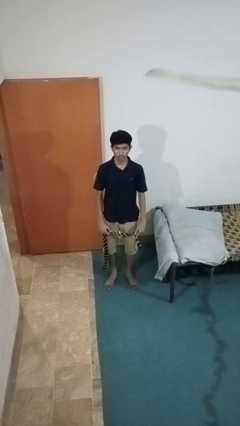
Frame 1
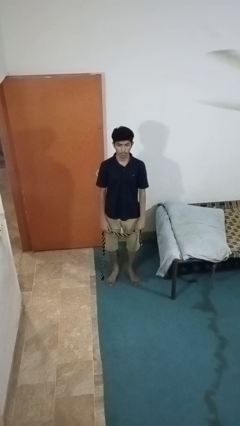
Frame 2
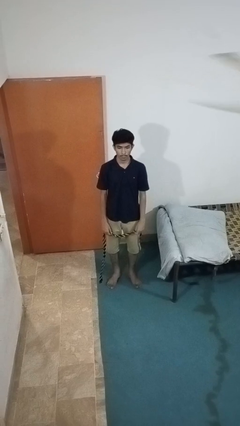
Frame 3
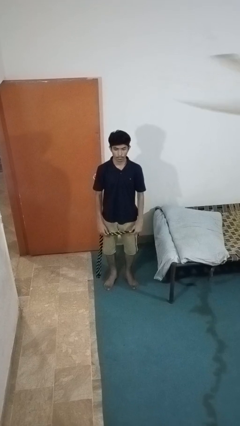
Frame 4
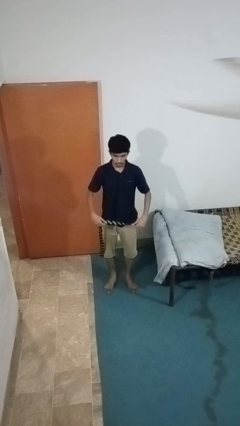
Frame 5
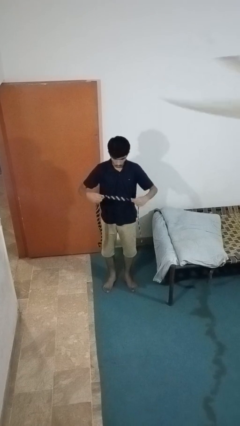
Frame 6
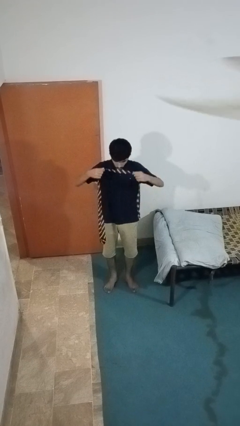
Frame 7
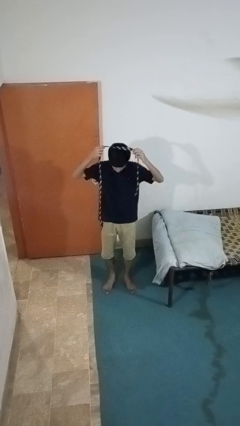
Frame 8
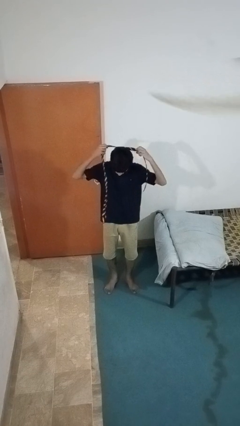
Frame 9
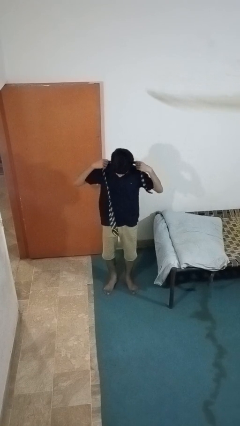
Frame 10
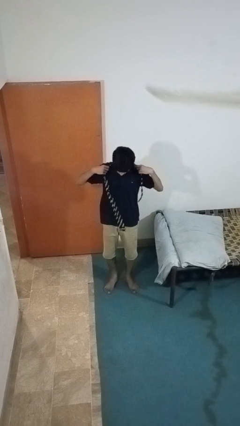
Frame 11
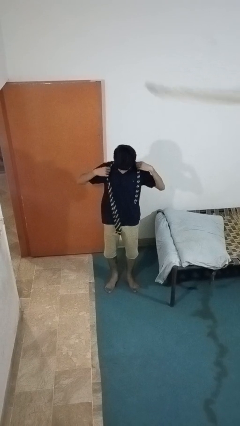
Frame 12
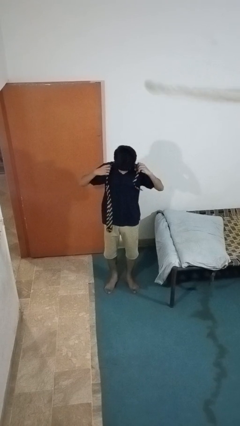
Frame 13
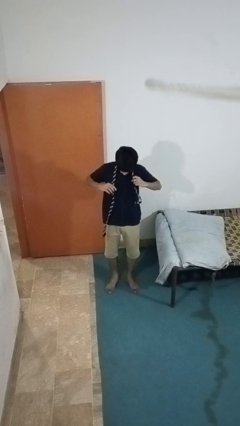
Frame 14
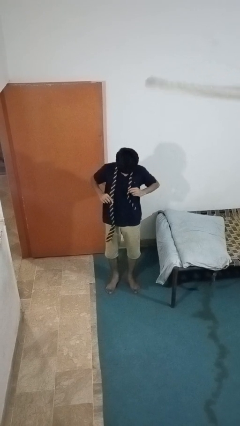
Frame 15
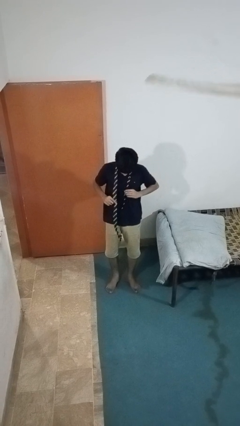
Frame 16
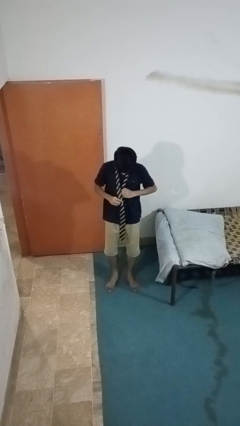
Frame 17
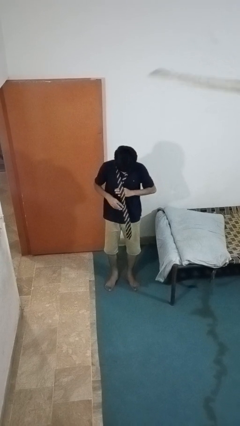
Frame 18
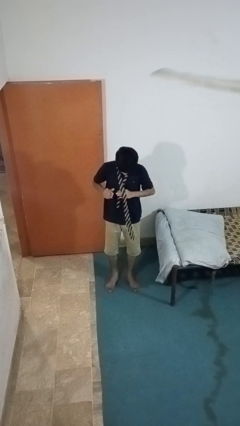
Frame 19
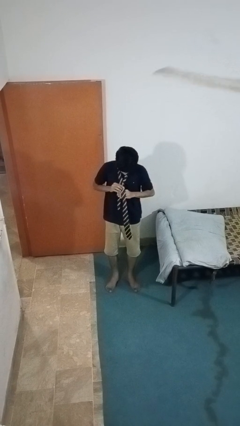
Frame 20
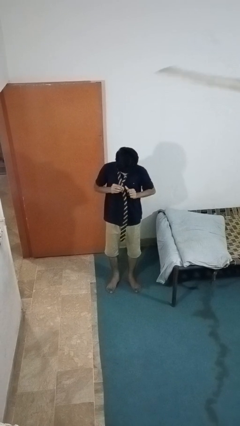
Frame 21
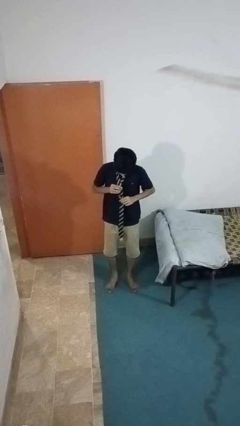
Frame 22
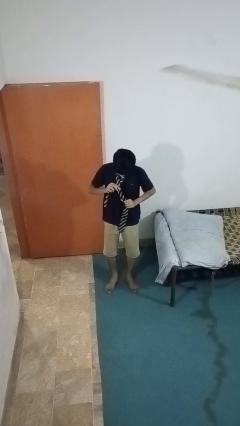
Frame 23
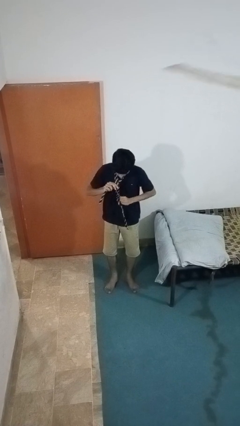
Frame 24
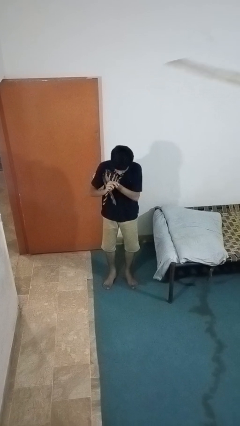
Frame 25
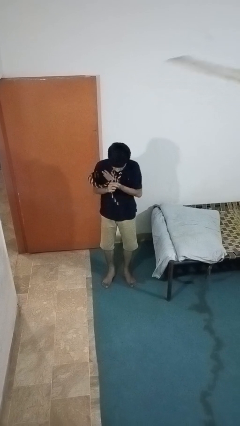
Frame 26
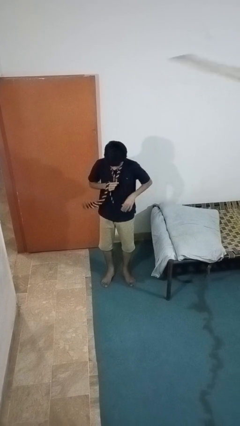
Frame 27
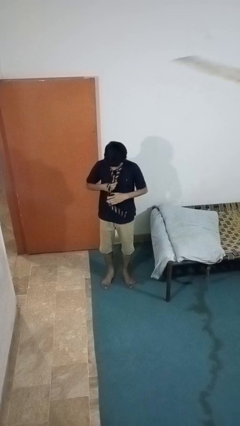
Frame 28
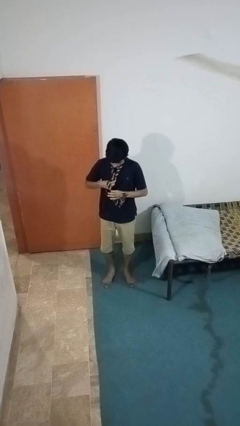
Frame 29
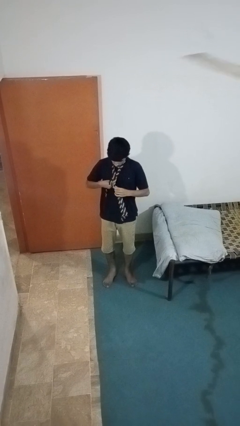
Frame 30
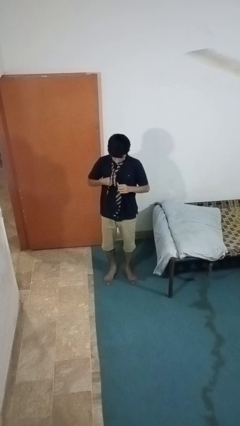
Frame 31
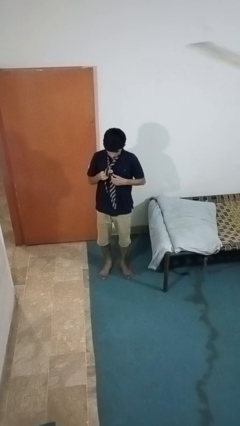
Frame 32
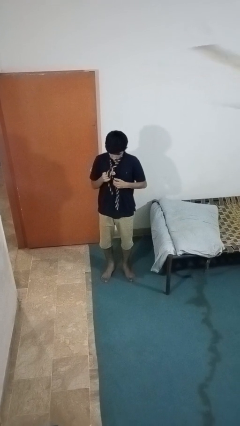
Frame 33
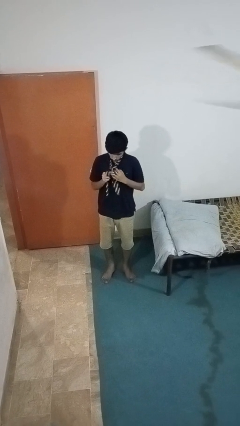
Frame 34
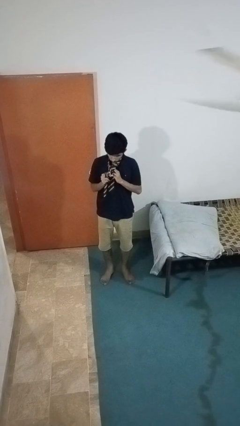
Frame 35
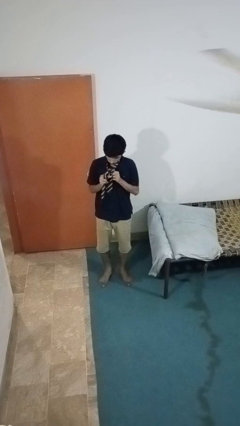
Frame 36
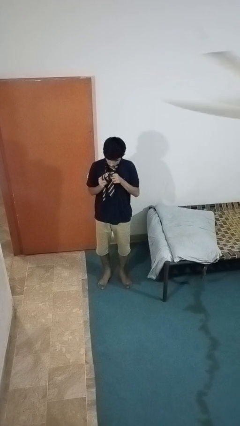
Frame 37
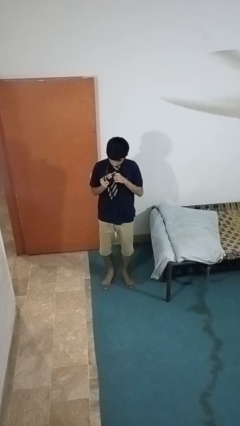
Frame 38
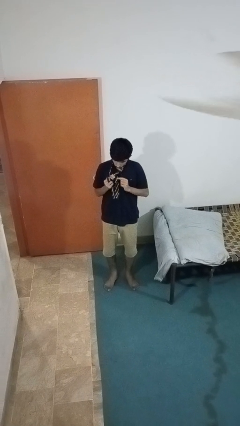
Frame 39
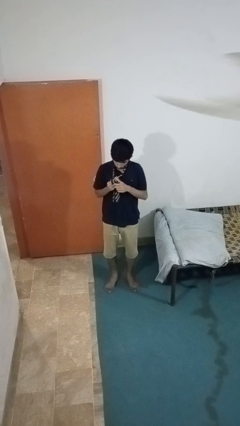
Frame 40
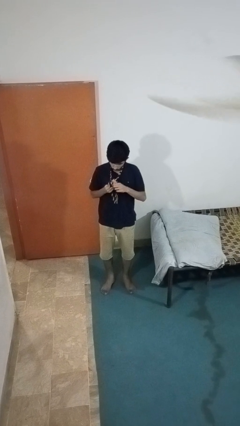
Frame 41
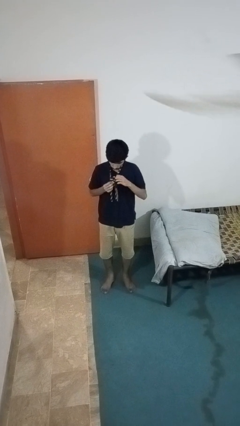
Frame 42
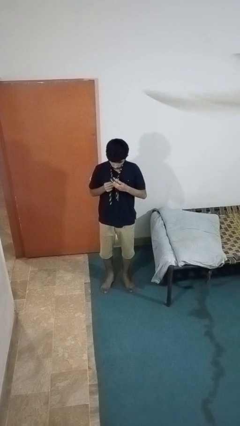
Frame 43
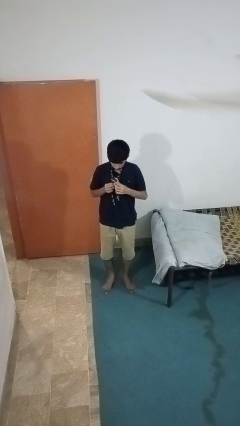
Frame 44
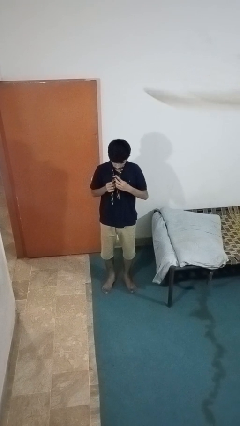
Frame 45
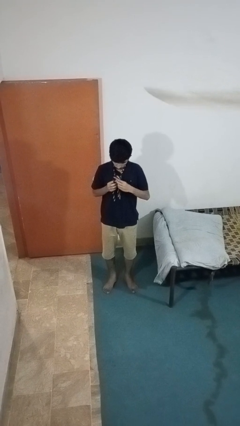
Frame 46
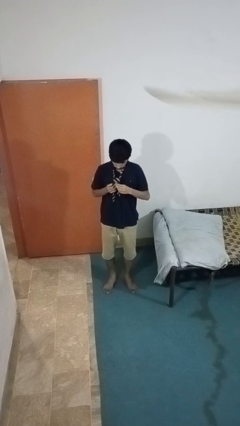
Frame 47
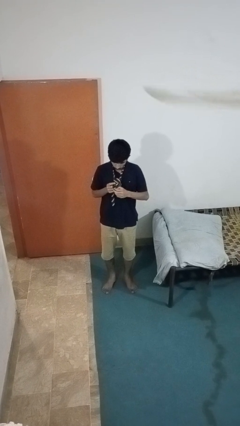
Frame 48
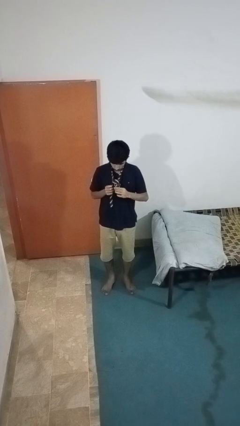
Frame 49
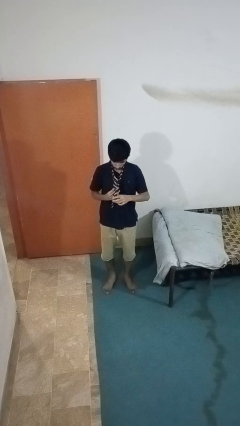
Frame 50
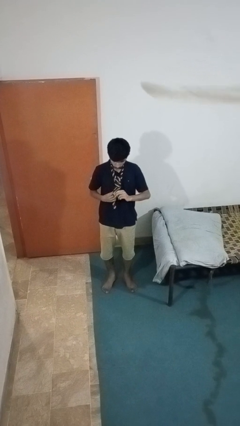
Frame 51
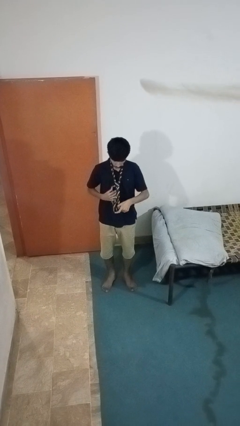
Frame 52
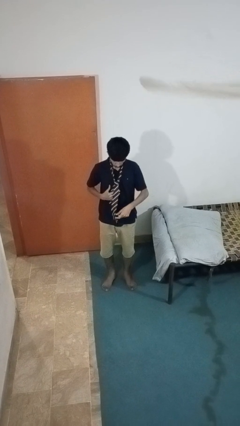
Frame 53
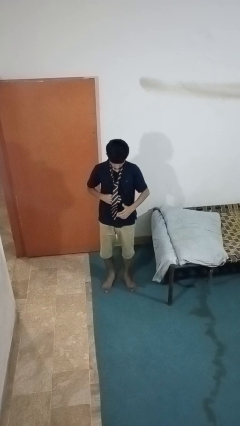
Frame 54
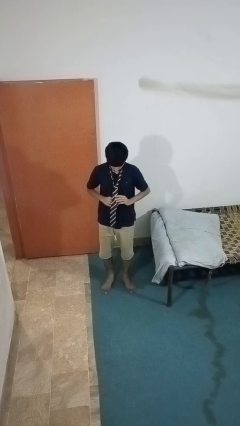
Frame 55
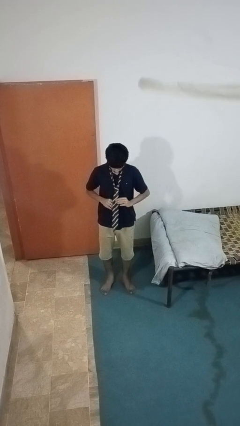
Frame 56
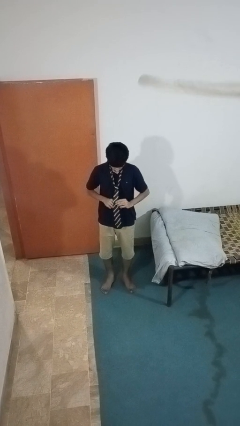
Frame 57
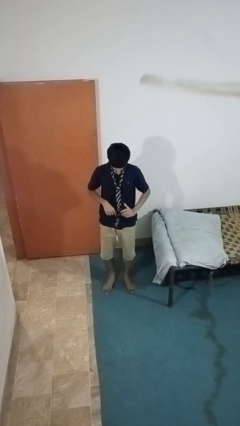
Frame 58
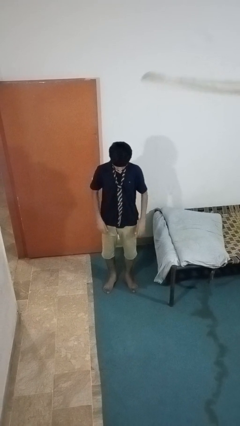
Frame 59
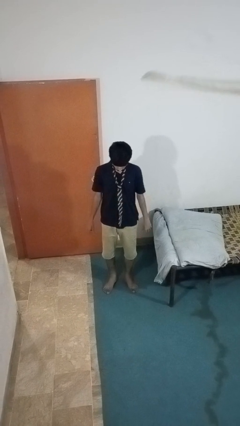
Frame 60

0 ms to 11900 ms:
person puts on necktie

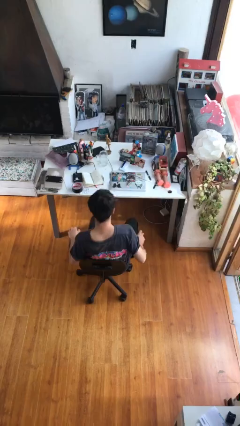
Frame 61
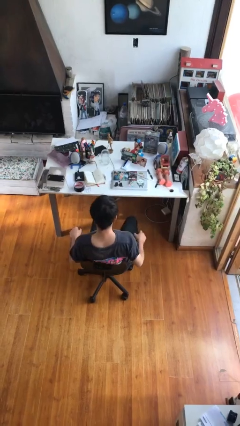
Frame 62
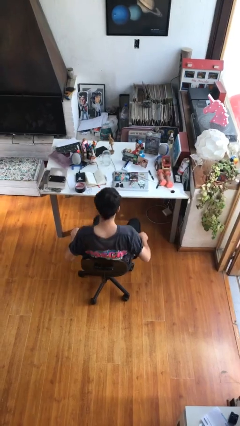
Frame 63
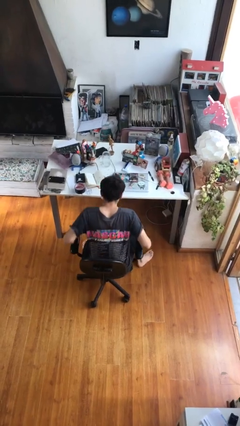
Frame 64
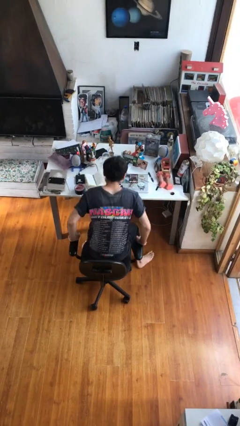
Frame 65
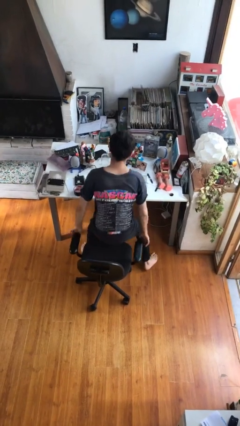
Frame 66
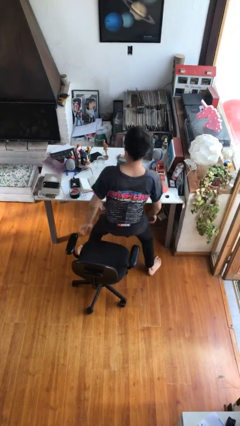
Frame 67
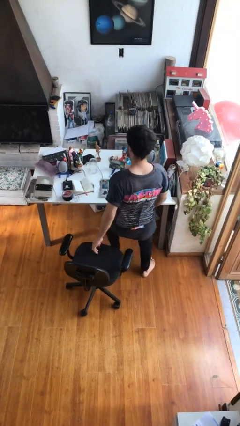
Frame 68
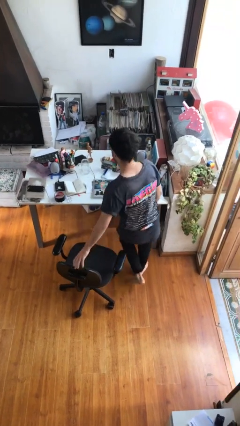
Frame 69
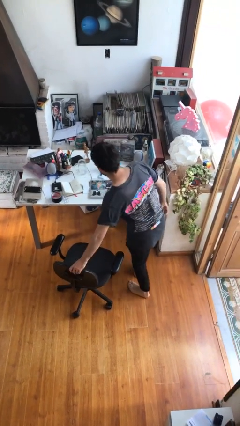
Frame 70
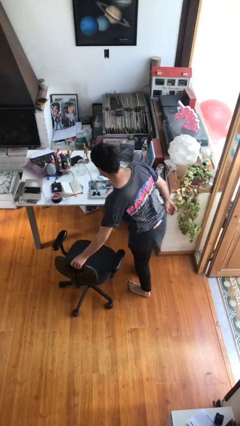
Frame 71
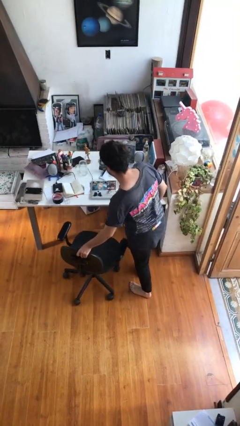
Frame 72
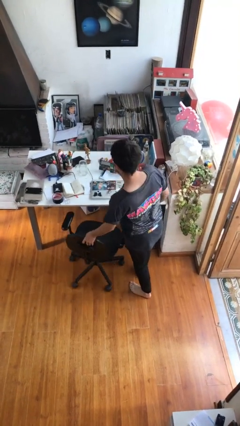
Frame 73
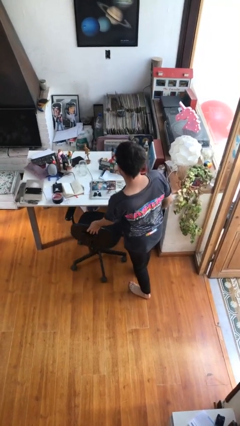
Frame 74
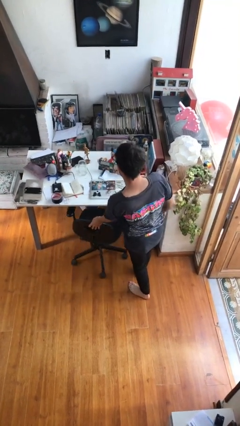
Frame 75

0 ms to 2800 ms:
person stands up

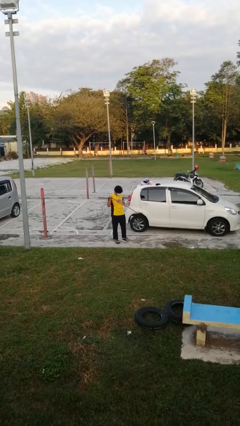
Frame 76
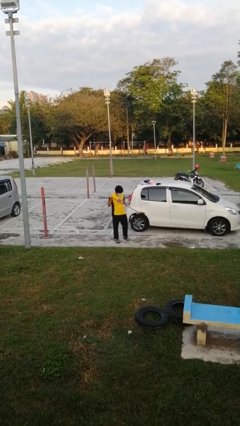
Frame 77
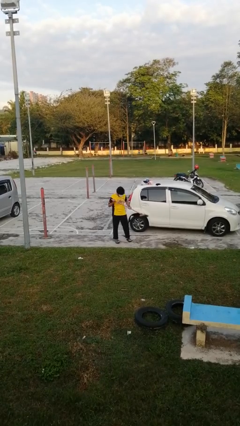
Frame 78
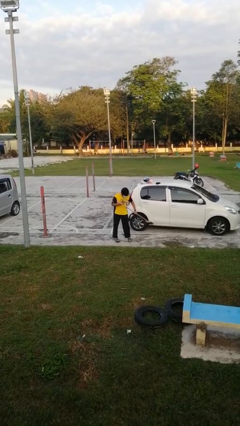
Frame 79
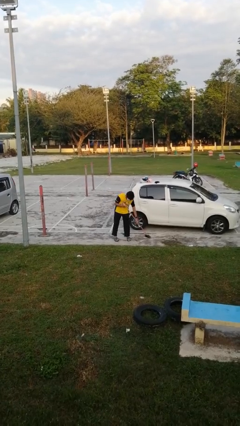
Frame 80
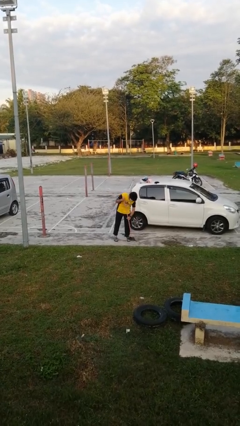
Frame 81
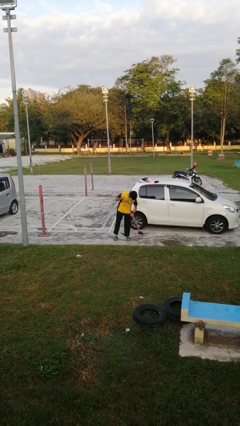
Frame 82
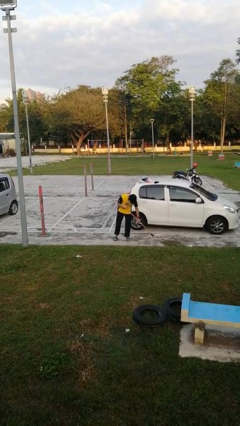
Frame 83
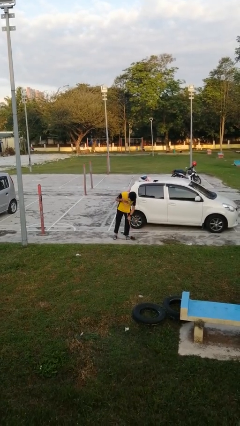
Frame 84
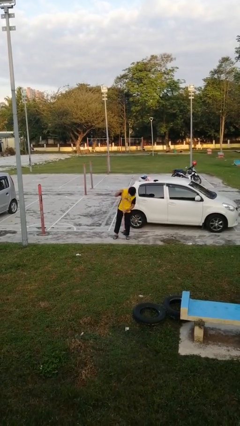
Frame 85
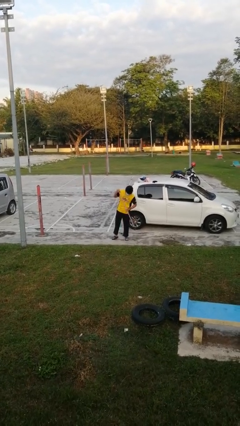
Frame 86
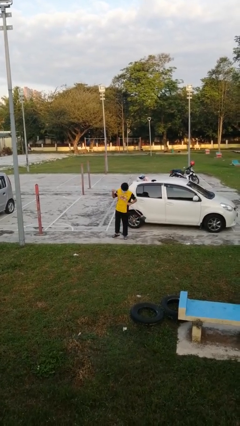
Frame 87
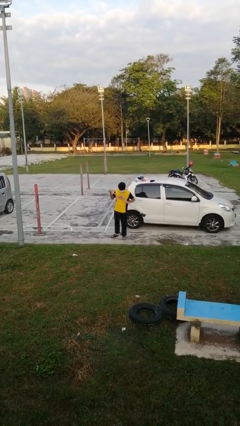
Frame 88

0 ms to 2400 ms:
person sweeps floor

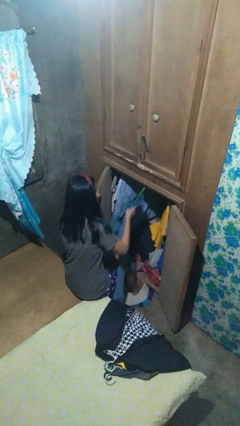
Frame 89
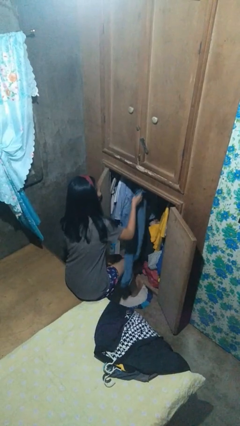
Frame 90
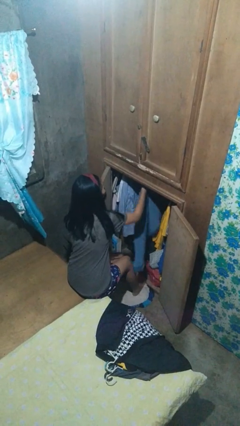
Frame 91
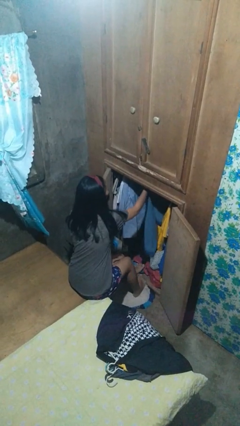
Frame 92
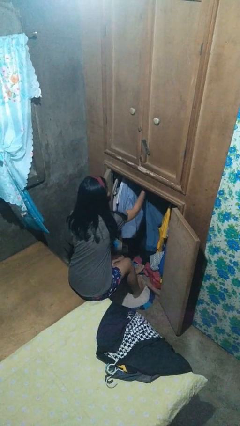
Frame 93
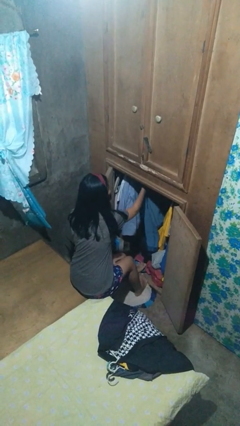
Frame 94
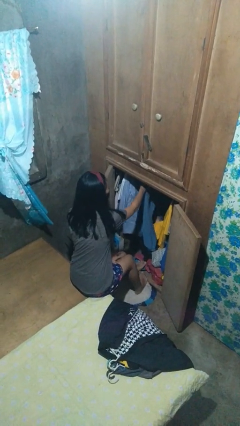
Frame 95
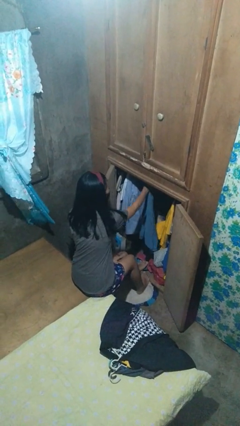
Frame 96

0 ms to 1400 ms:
person puts clothes into closet
